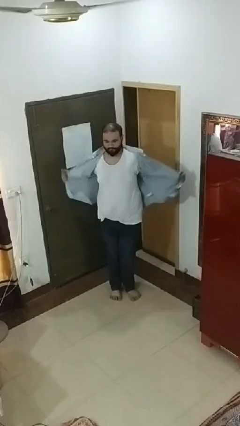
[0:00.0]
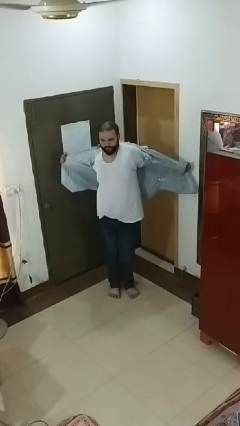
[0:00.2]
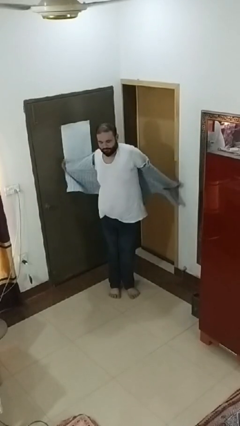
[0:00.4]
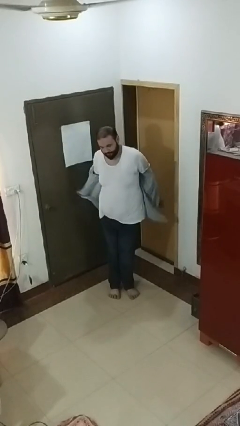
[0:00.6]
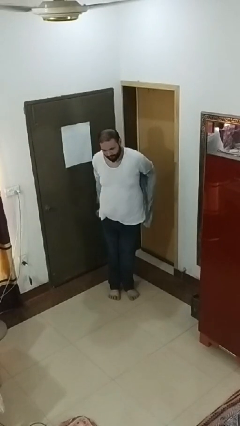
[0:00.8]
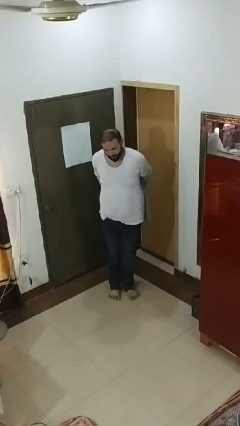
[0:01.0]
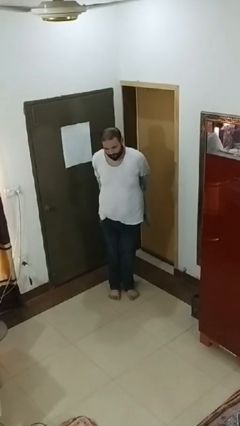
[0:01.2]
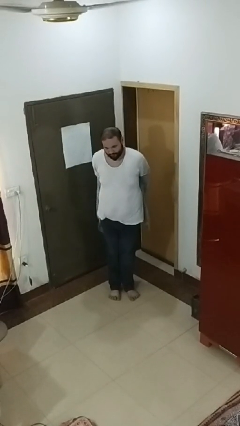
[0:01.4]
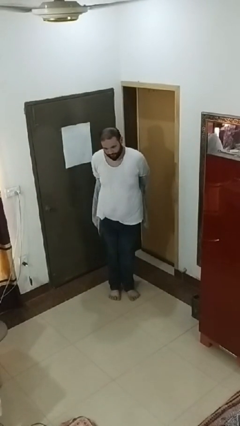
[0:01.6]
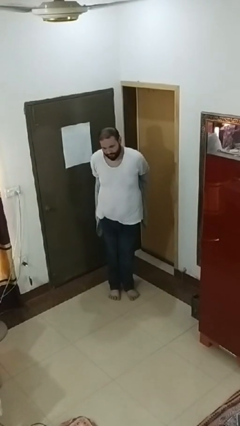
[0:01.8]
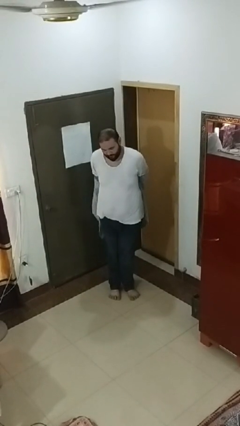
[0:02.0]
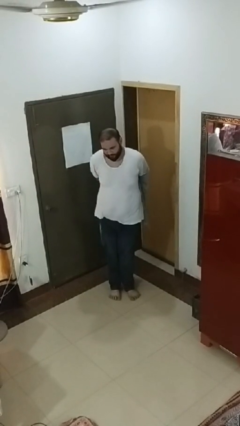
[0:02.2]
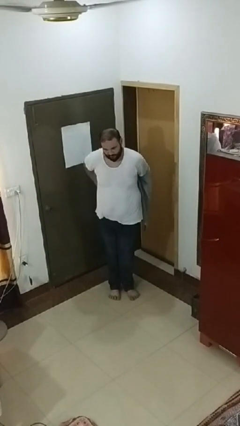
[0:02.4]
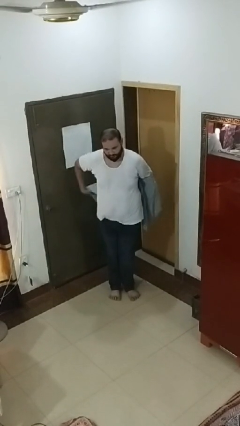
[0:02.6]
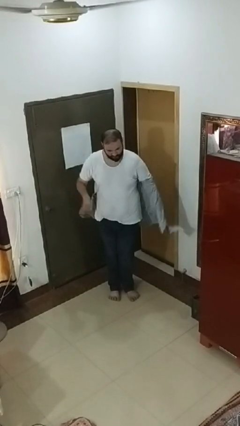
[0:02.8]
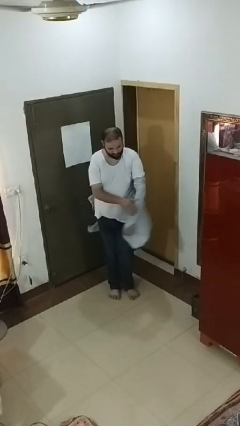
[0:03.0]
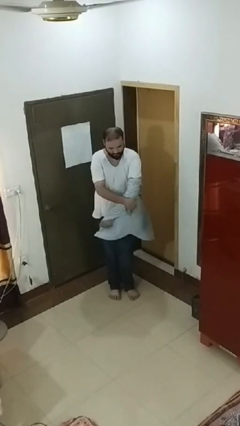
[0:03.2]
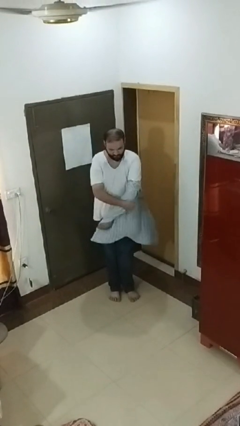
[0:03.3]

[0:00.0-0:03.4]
person takes off shirt

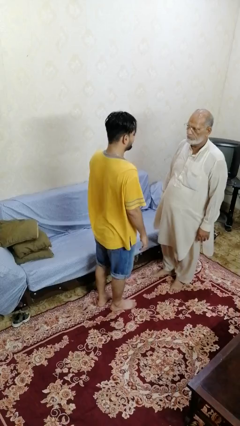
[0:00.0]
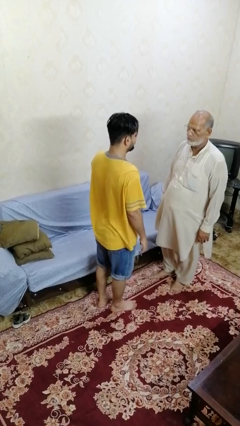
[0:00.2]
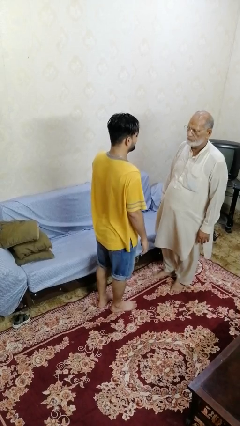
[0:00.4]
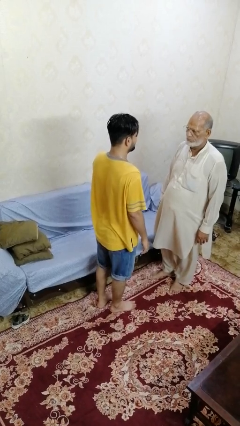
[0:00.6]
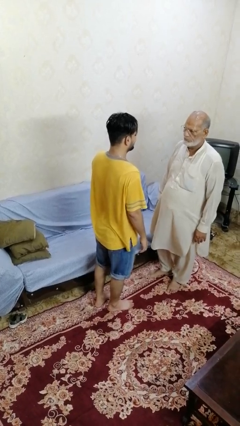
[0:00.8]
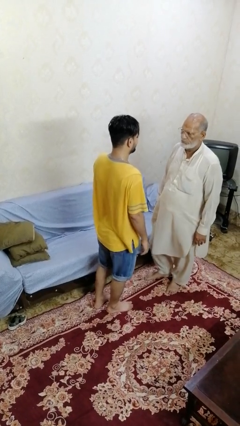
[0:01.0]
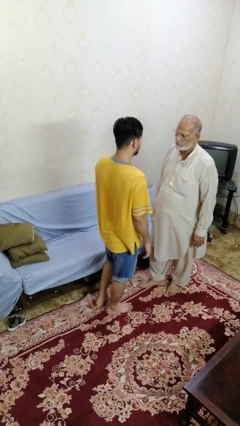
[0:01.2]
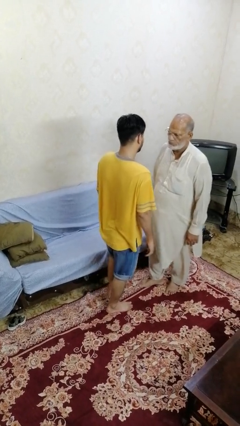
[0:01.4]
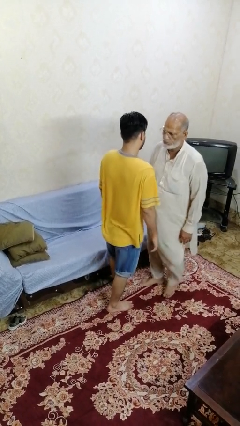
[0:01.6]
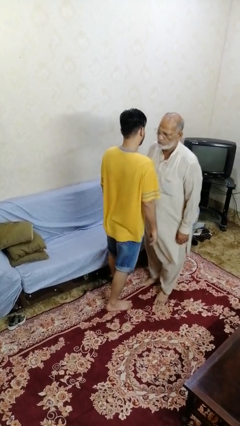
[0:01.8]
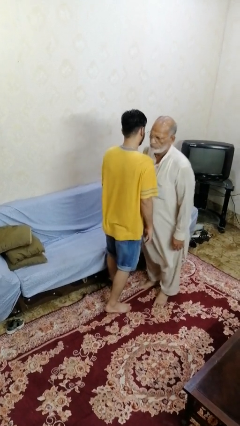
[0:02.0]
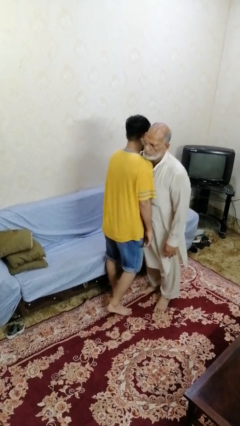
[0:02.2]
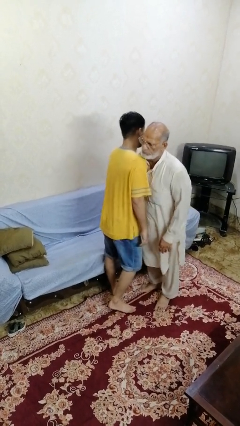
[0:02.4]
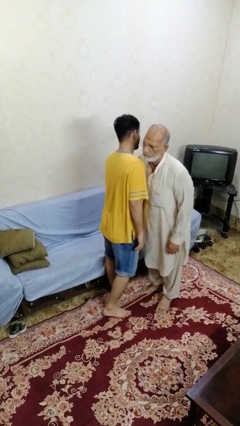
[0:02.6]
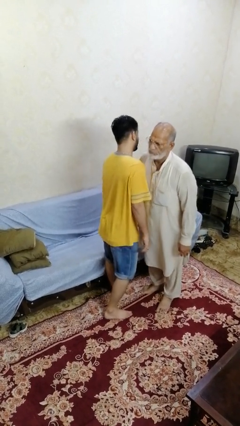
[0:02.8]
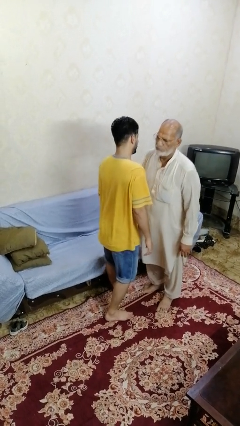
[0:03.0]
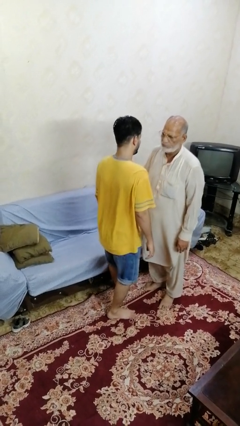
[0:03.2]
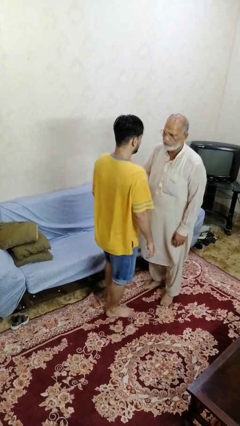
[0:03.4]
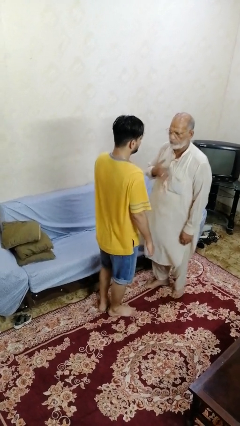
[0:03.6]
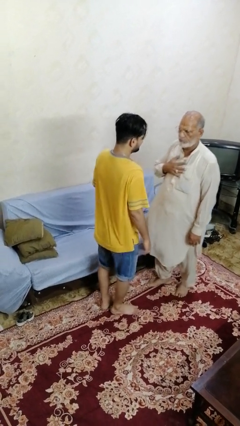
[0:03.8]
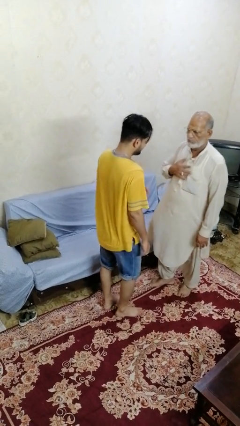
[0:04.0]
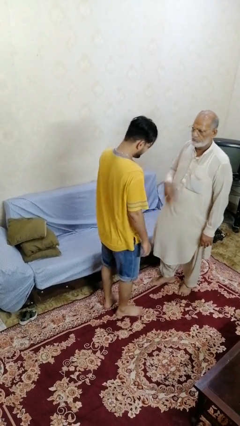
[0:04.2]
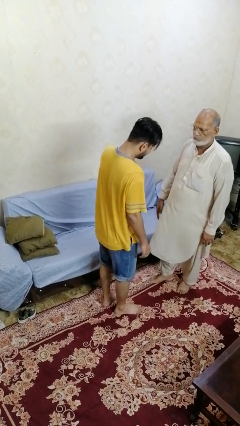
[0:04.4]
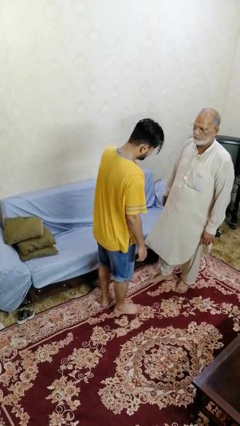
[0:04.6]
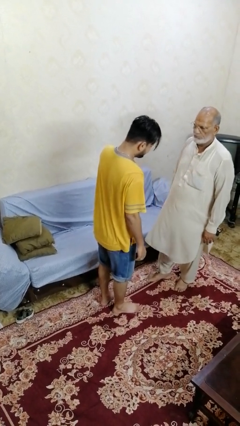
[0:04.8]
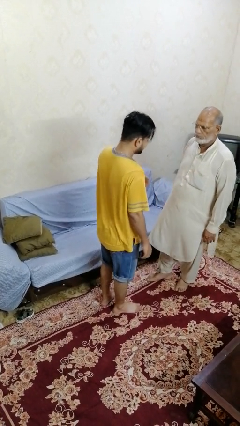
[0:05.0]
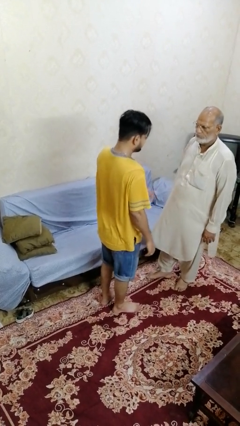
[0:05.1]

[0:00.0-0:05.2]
person bumps into person

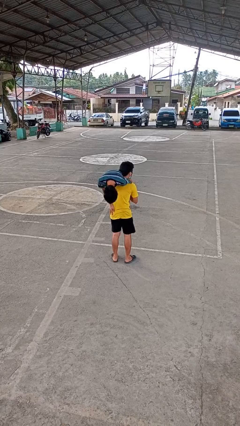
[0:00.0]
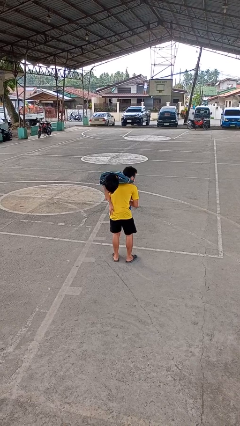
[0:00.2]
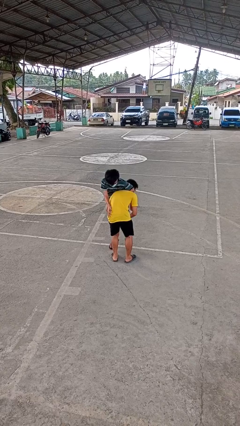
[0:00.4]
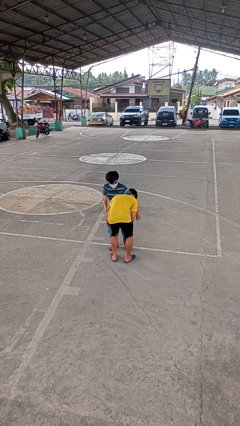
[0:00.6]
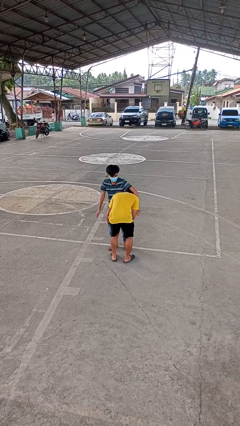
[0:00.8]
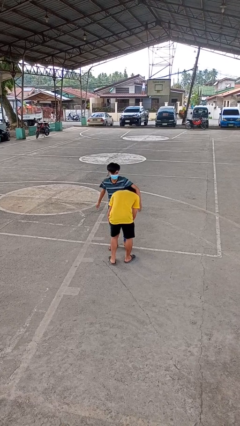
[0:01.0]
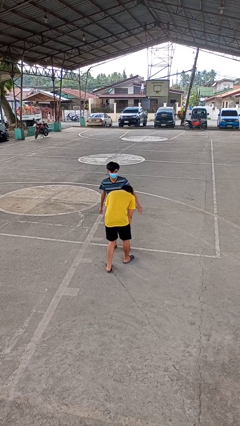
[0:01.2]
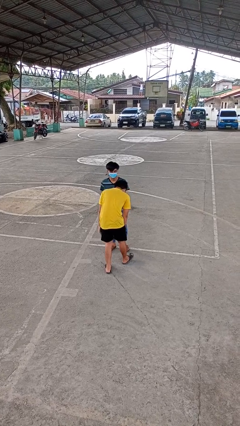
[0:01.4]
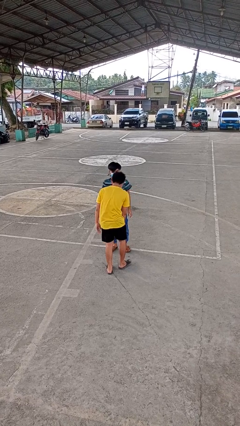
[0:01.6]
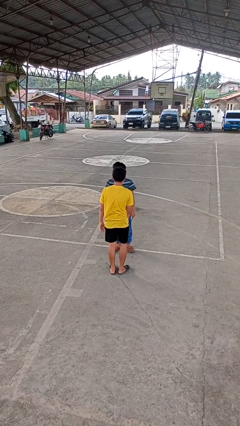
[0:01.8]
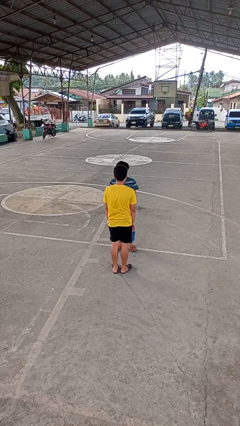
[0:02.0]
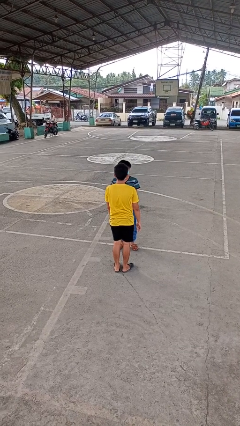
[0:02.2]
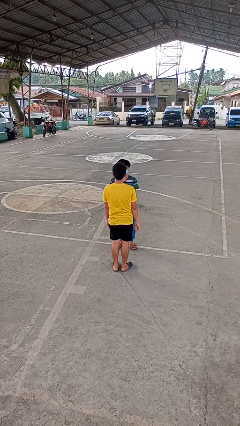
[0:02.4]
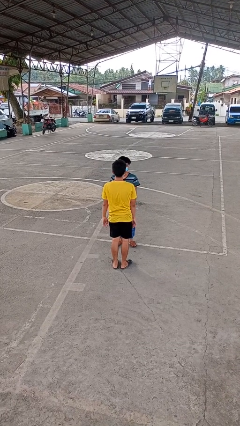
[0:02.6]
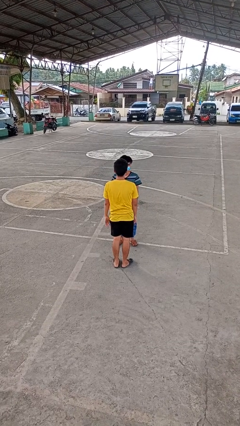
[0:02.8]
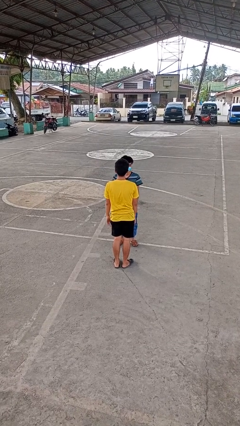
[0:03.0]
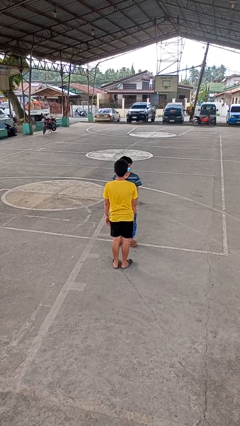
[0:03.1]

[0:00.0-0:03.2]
person puts down person

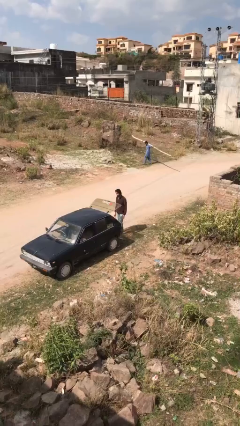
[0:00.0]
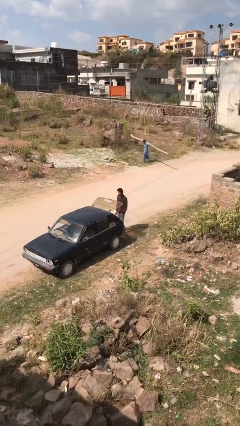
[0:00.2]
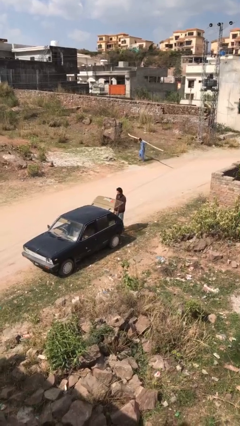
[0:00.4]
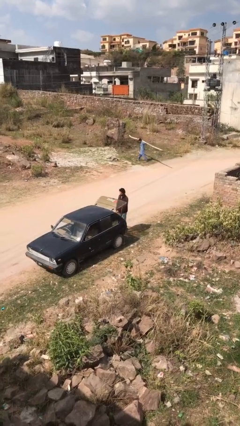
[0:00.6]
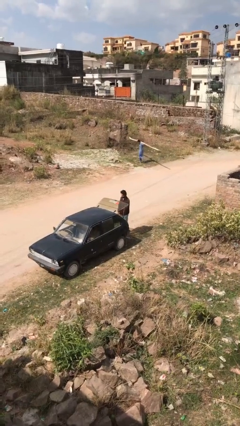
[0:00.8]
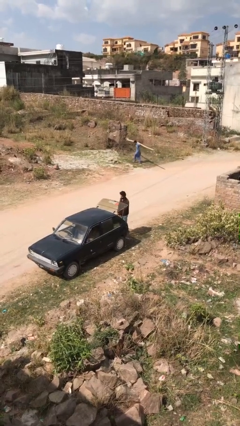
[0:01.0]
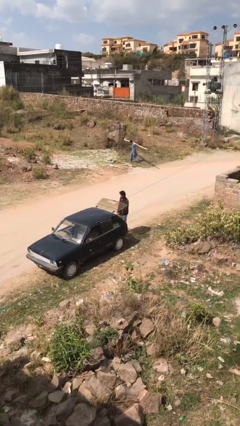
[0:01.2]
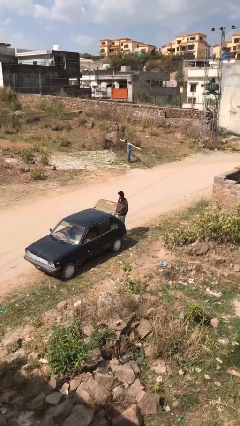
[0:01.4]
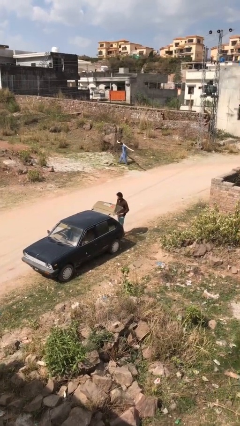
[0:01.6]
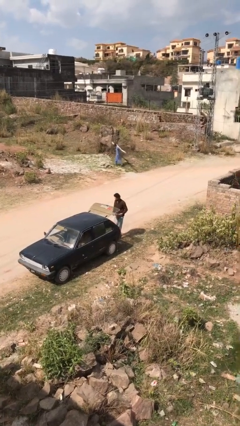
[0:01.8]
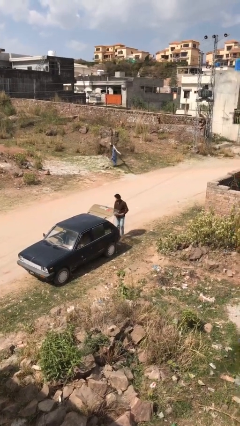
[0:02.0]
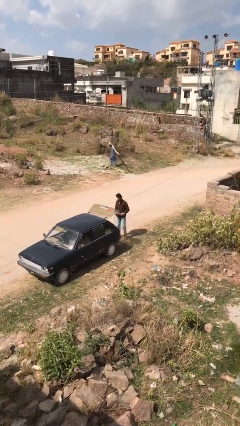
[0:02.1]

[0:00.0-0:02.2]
person unloads car

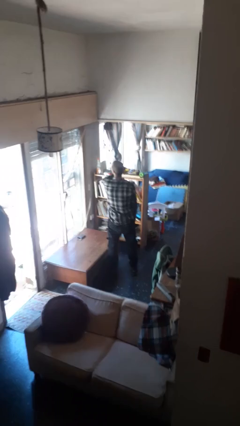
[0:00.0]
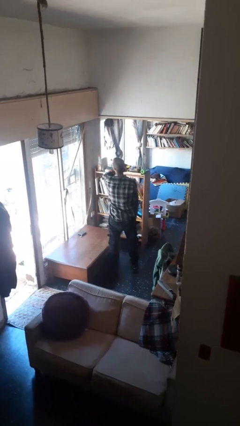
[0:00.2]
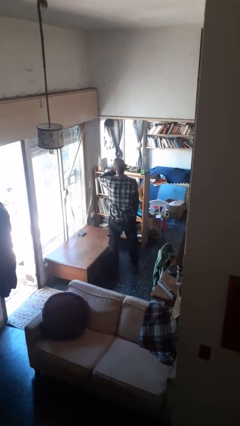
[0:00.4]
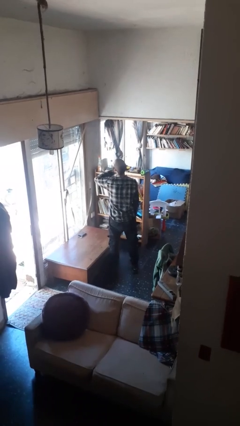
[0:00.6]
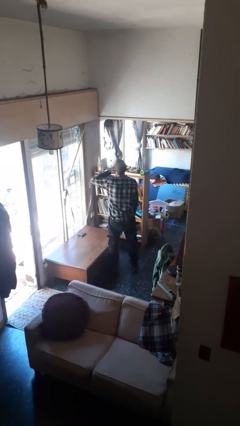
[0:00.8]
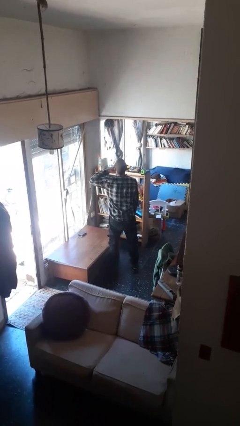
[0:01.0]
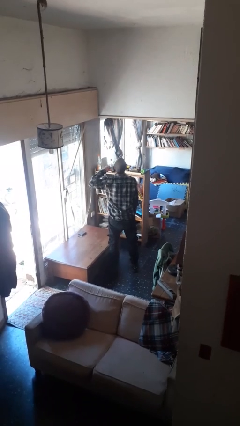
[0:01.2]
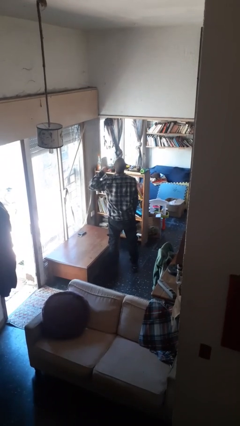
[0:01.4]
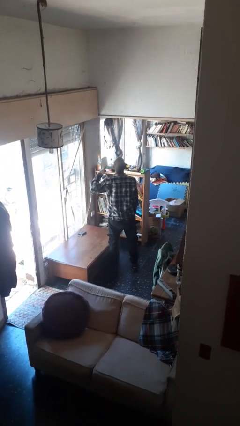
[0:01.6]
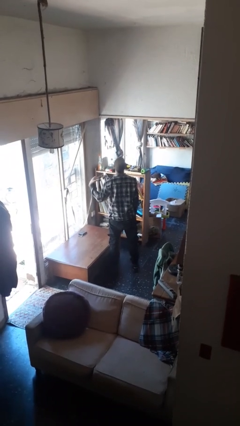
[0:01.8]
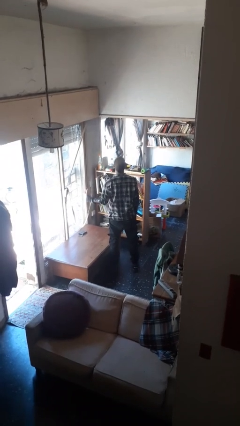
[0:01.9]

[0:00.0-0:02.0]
person gestures cut

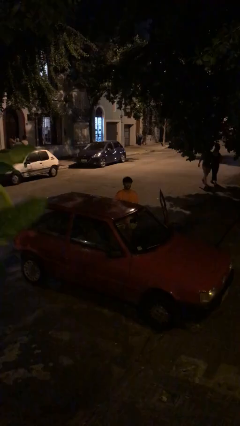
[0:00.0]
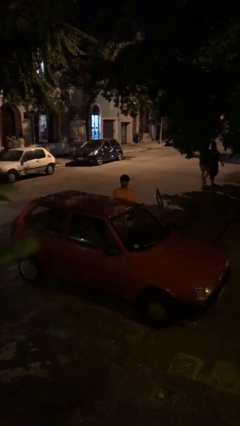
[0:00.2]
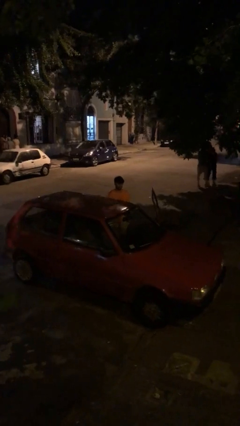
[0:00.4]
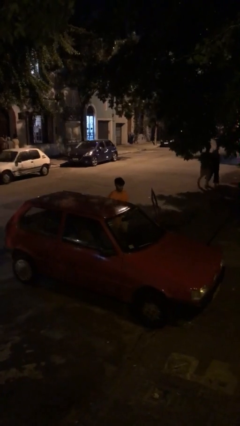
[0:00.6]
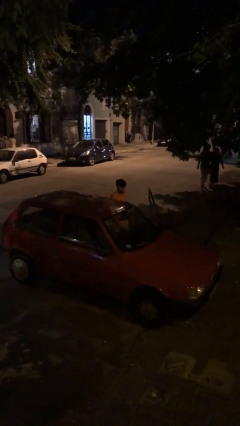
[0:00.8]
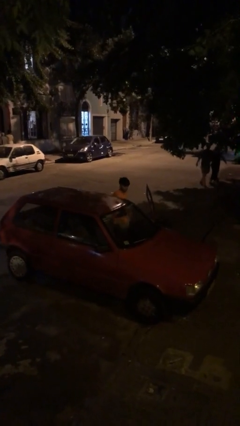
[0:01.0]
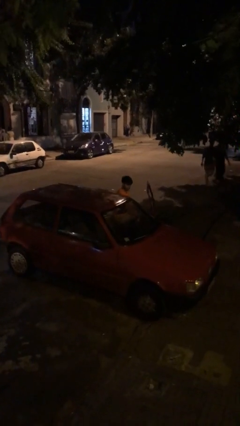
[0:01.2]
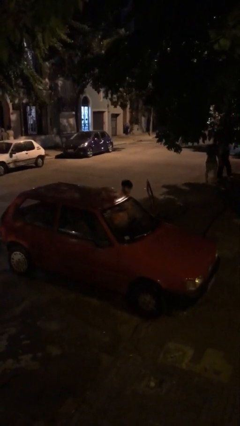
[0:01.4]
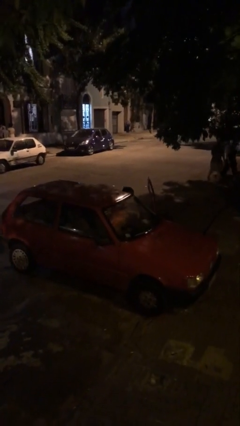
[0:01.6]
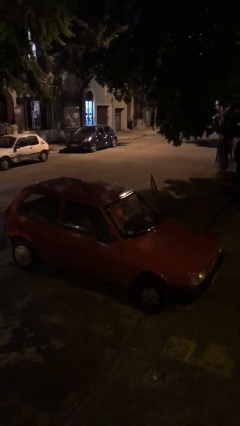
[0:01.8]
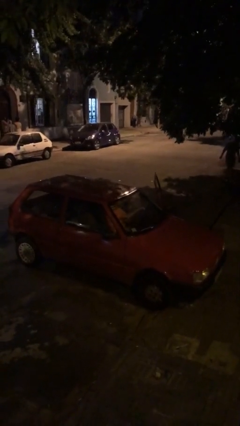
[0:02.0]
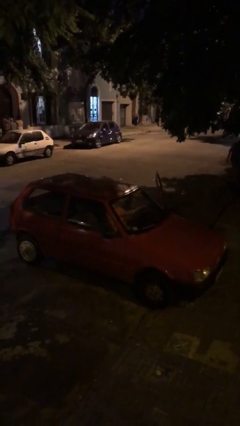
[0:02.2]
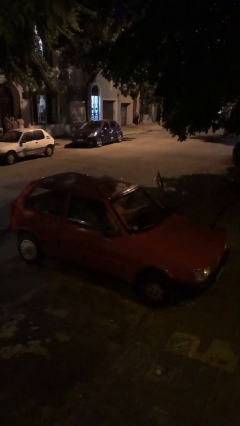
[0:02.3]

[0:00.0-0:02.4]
person enters car
